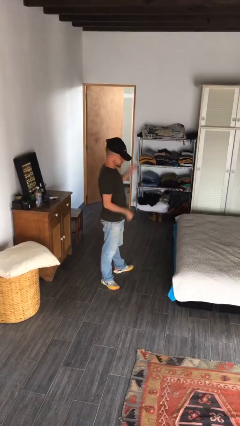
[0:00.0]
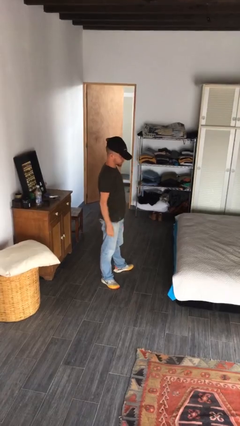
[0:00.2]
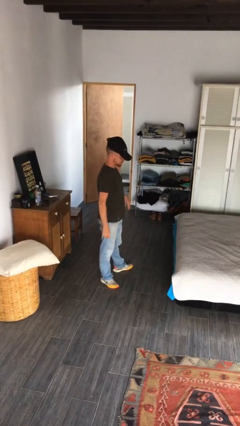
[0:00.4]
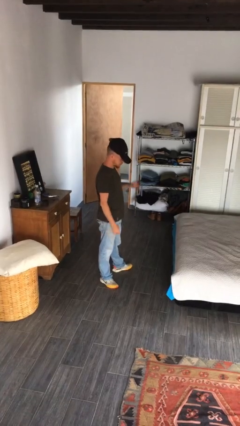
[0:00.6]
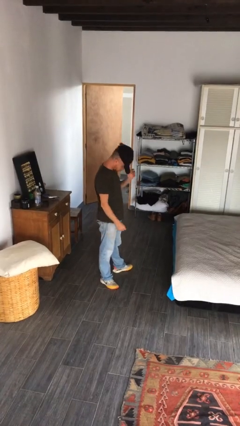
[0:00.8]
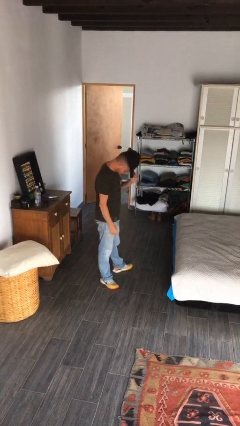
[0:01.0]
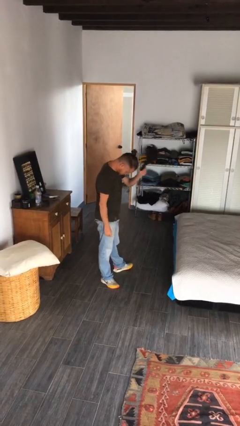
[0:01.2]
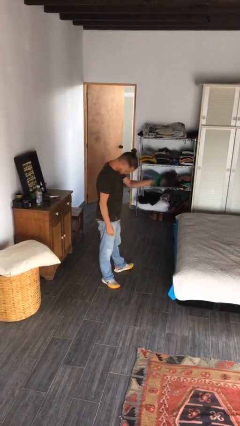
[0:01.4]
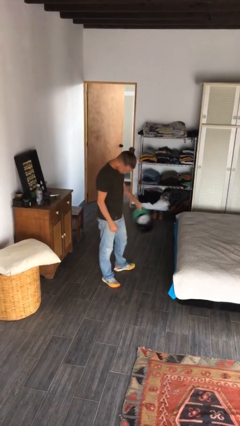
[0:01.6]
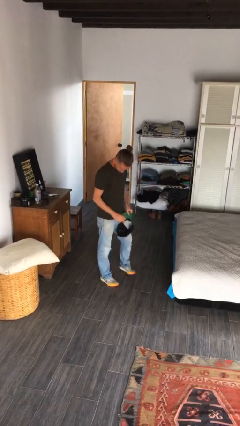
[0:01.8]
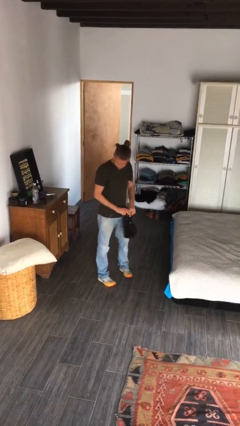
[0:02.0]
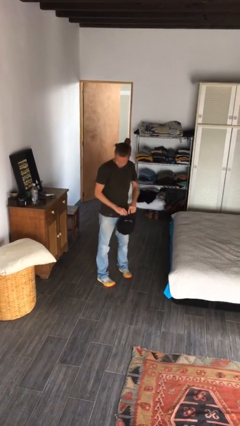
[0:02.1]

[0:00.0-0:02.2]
person takes off hat

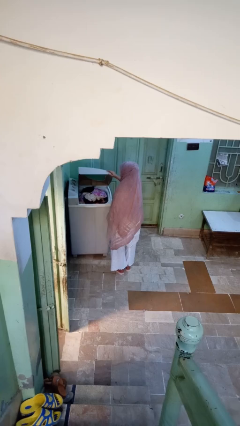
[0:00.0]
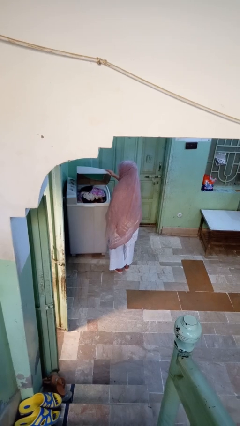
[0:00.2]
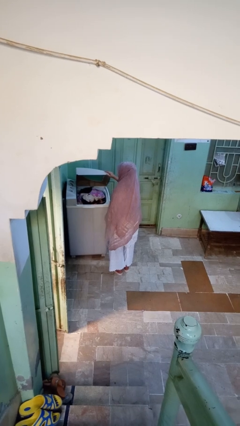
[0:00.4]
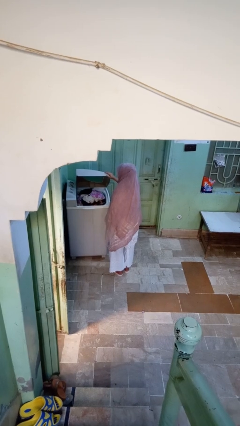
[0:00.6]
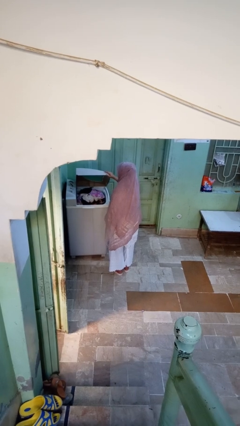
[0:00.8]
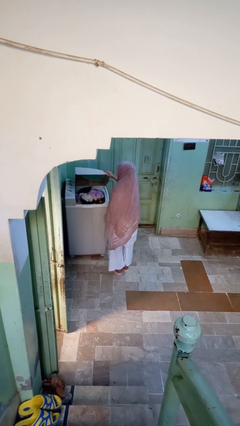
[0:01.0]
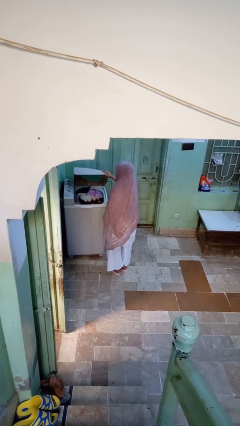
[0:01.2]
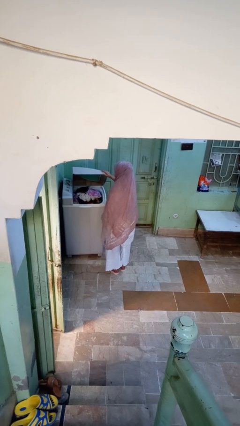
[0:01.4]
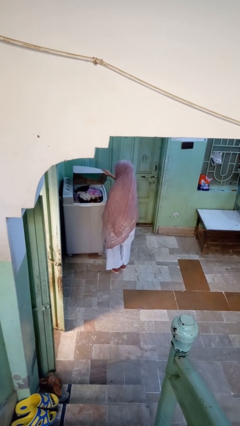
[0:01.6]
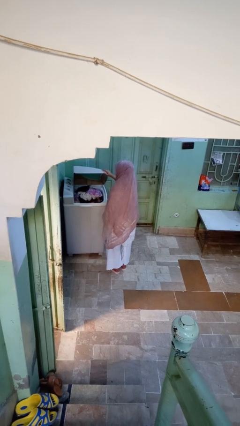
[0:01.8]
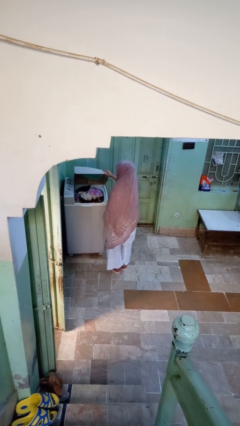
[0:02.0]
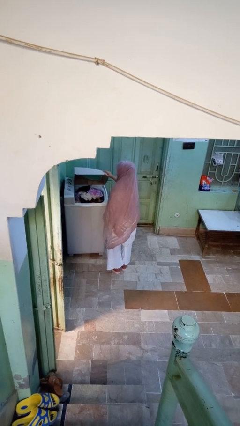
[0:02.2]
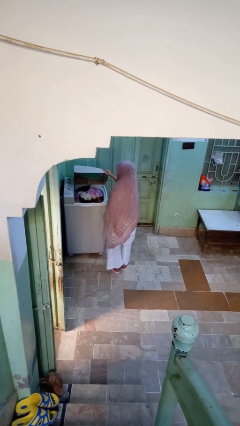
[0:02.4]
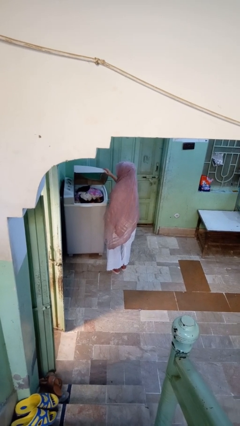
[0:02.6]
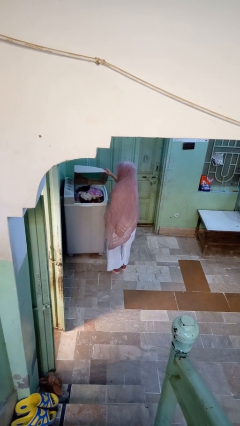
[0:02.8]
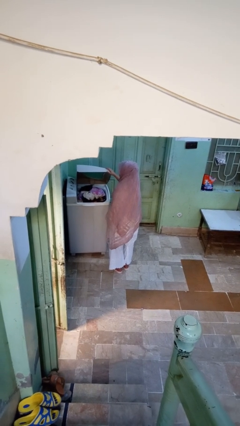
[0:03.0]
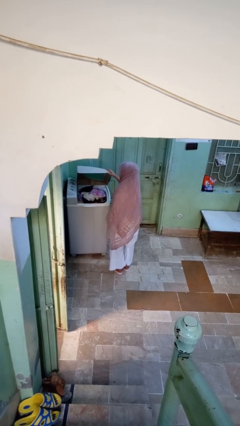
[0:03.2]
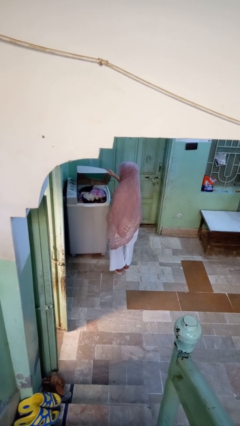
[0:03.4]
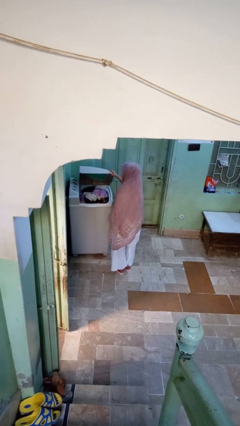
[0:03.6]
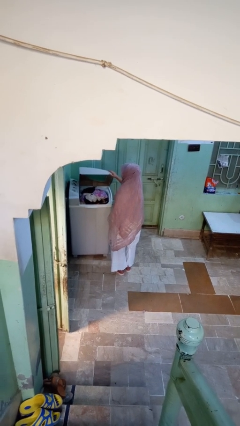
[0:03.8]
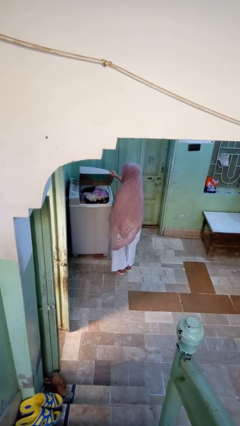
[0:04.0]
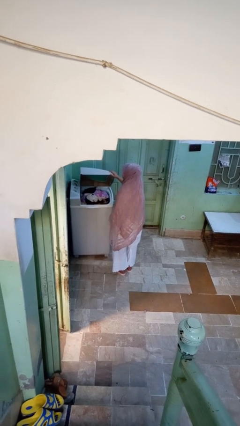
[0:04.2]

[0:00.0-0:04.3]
person opens clothes washer

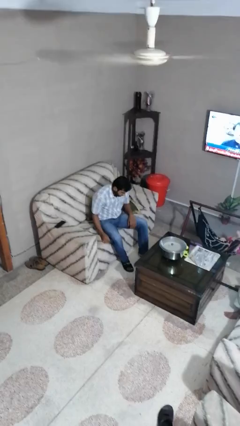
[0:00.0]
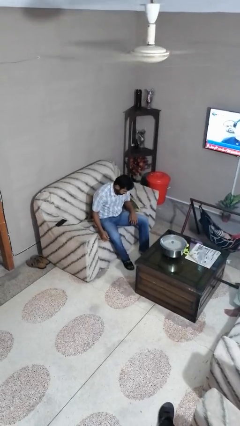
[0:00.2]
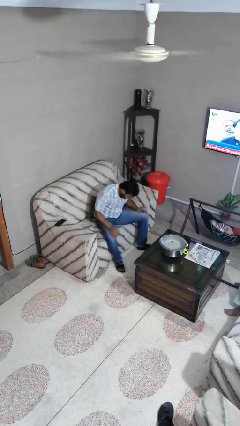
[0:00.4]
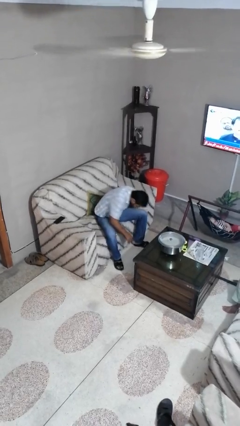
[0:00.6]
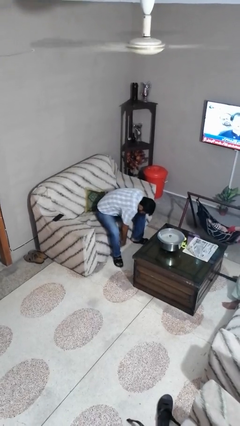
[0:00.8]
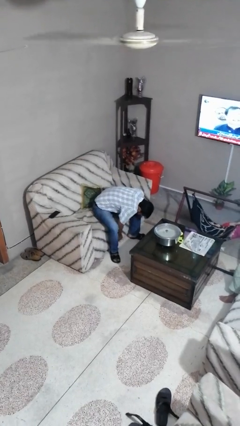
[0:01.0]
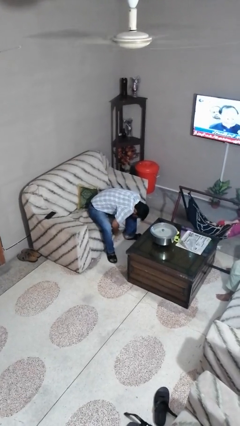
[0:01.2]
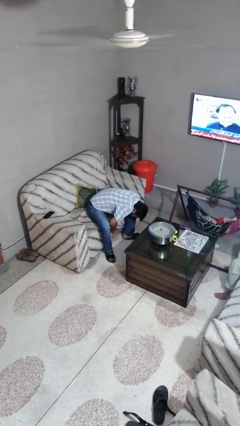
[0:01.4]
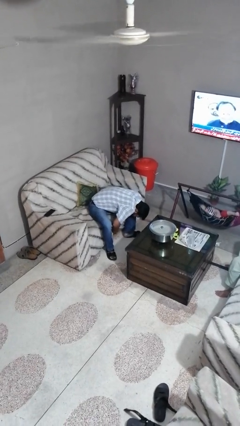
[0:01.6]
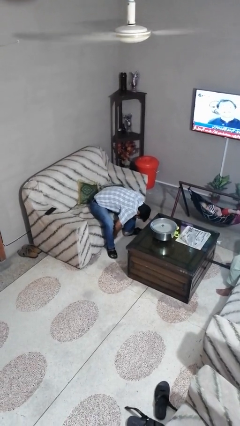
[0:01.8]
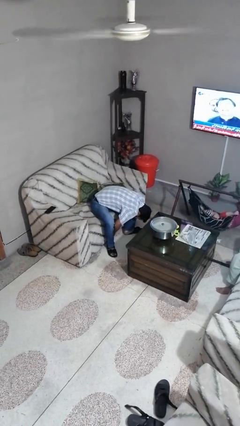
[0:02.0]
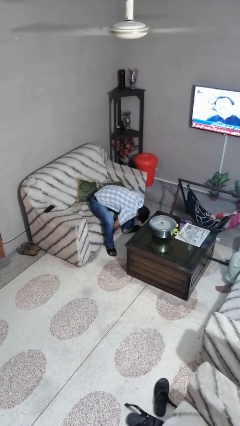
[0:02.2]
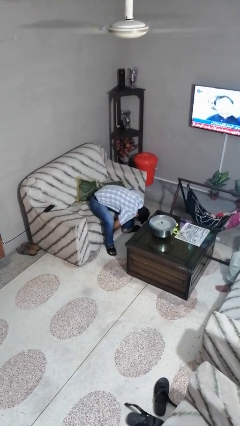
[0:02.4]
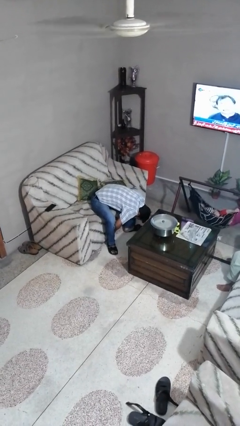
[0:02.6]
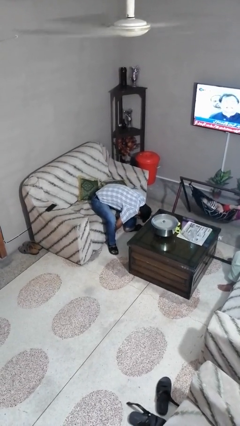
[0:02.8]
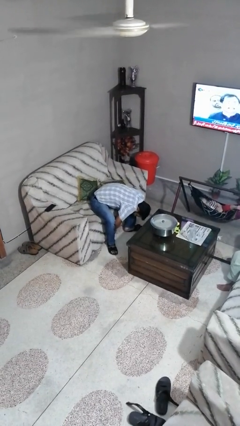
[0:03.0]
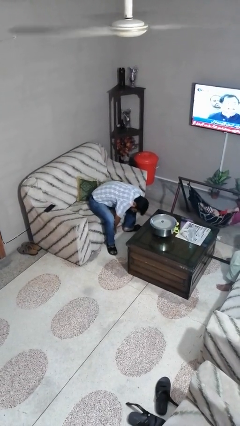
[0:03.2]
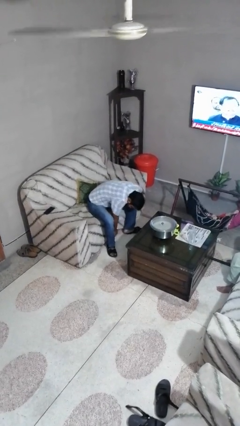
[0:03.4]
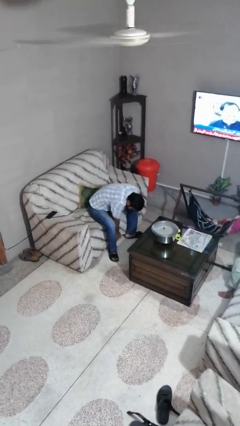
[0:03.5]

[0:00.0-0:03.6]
person searches under couch

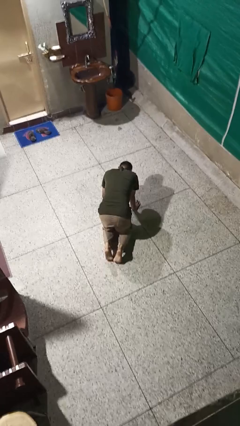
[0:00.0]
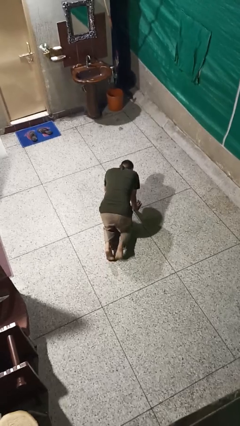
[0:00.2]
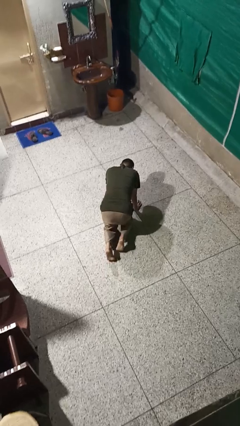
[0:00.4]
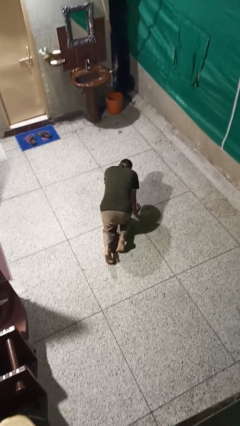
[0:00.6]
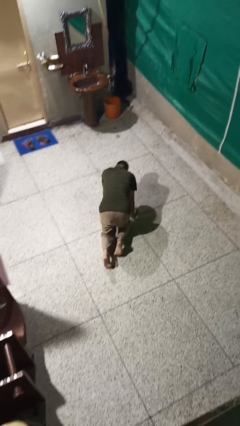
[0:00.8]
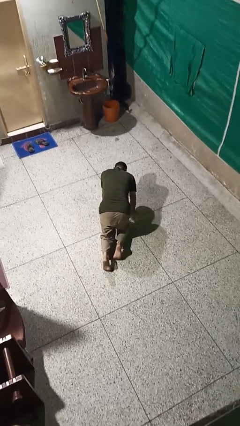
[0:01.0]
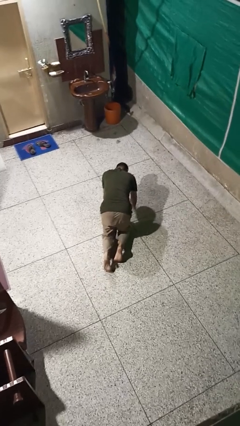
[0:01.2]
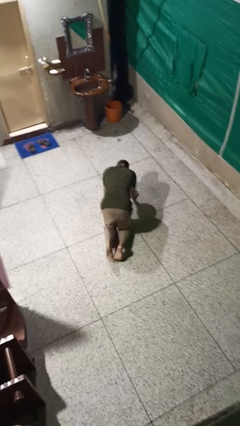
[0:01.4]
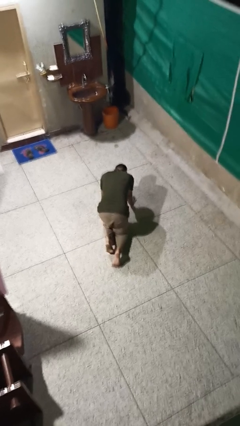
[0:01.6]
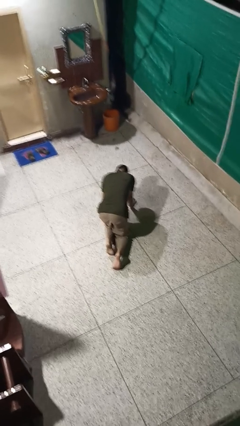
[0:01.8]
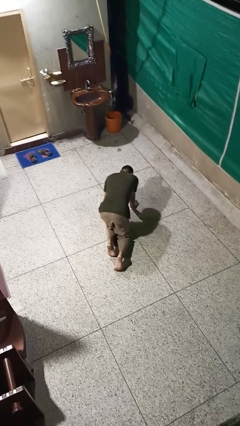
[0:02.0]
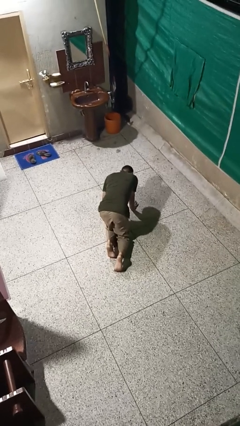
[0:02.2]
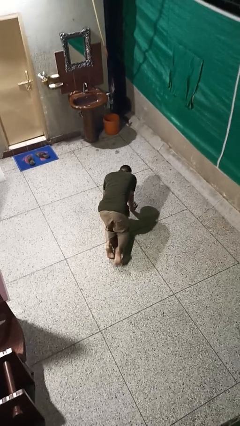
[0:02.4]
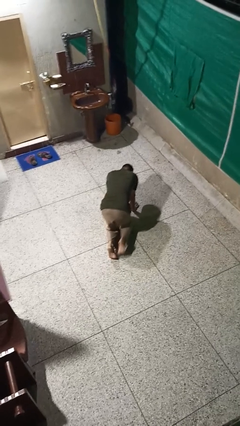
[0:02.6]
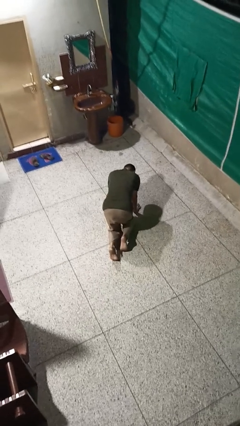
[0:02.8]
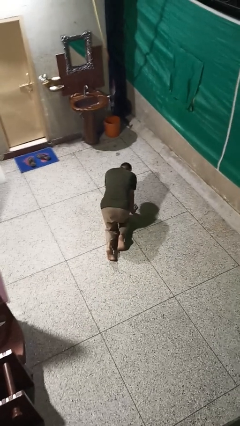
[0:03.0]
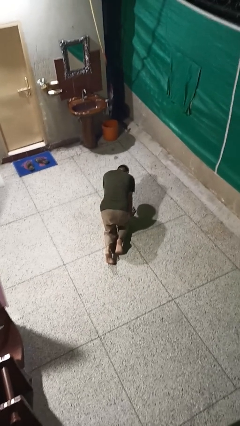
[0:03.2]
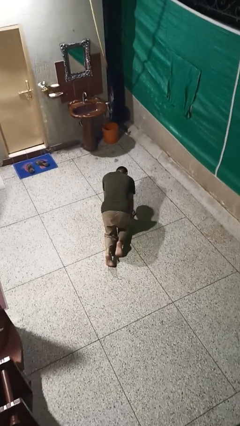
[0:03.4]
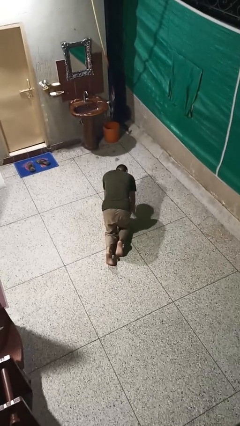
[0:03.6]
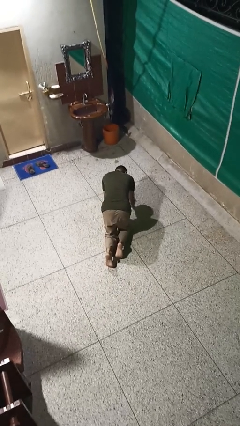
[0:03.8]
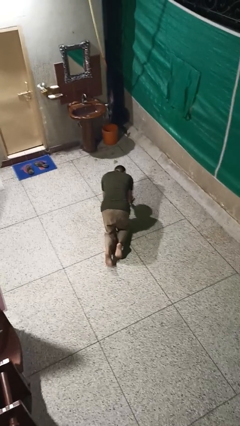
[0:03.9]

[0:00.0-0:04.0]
person crawls

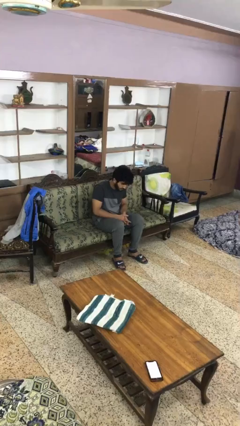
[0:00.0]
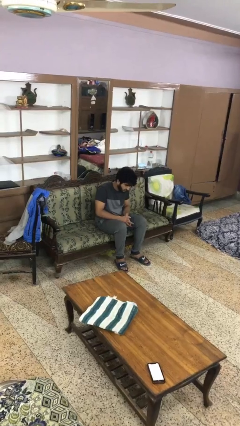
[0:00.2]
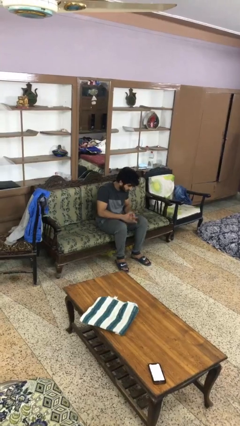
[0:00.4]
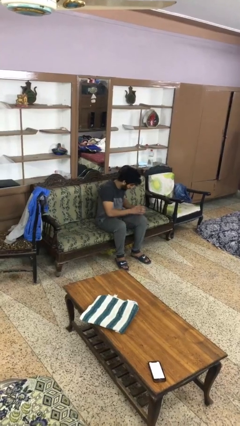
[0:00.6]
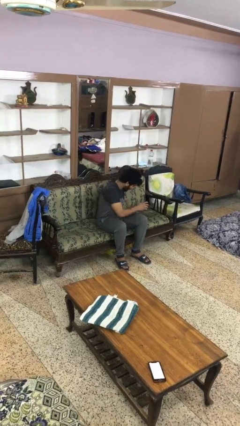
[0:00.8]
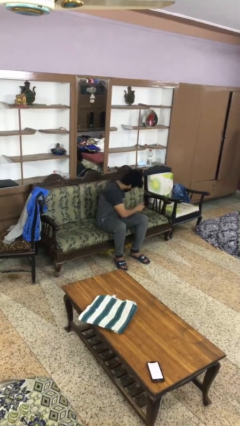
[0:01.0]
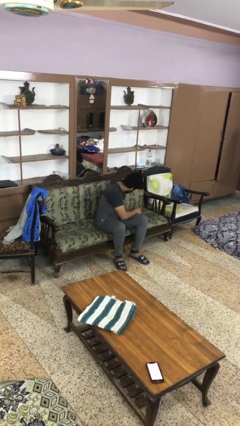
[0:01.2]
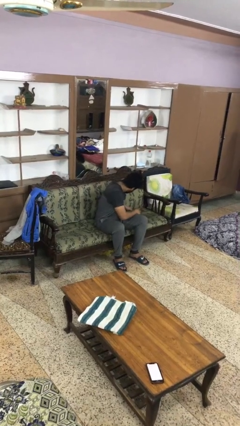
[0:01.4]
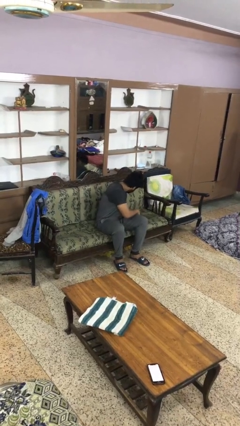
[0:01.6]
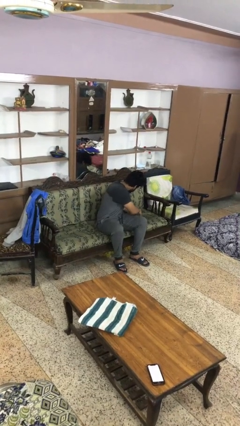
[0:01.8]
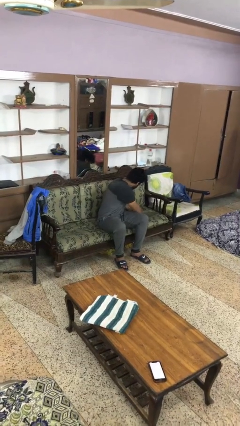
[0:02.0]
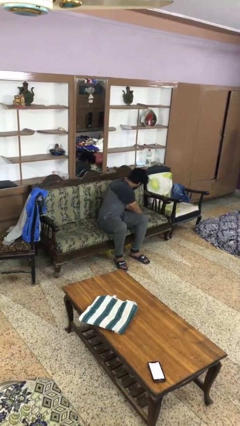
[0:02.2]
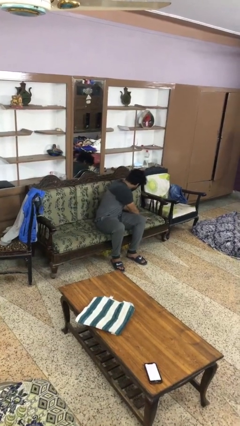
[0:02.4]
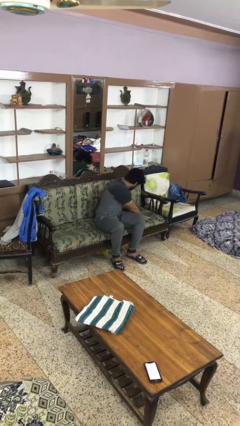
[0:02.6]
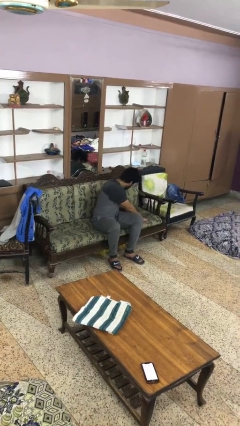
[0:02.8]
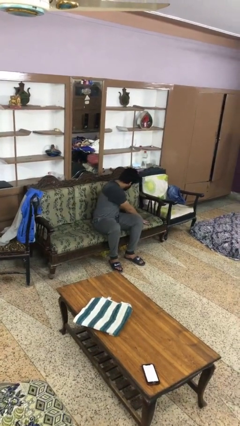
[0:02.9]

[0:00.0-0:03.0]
person searches in couch

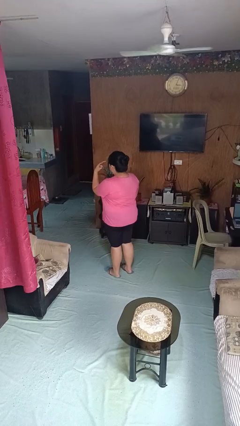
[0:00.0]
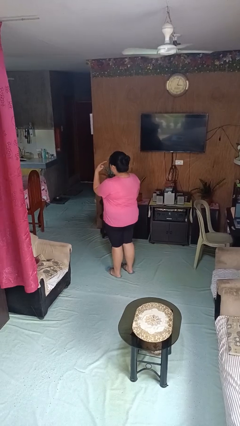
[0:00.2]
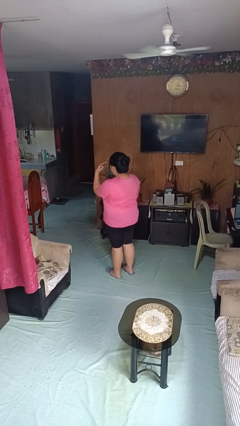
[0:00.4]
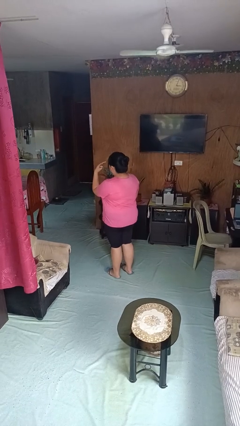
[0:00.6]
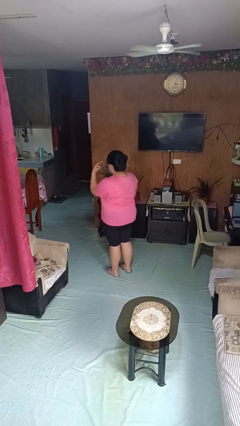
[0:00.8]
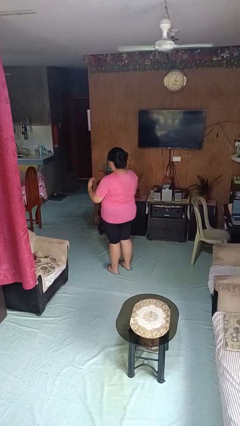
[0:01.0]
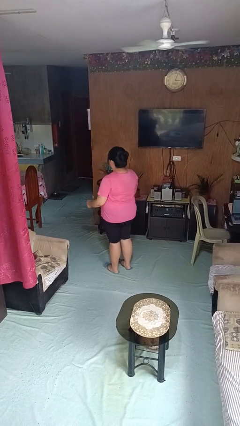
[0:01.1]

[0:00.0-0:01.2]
person gestures watch closely
